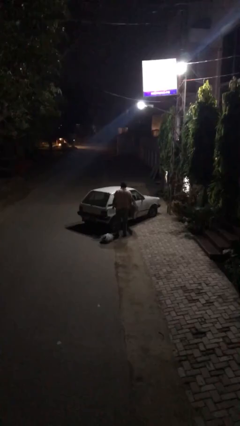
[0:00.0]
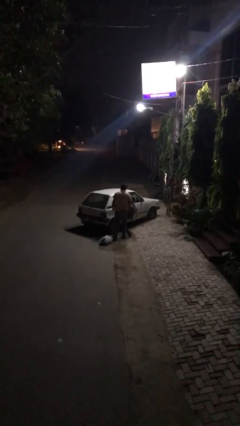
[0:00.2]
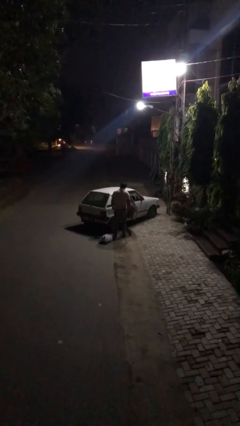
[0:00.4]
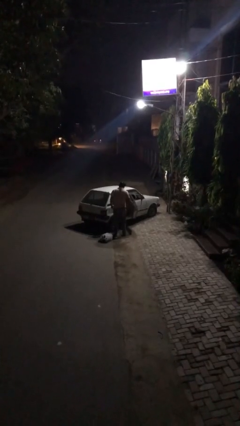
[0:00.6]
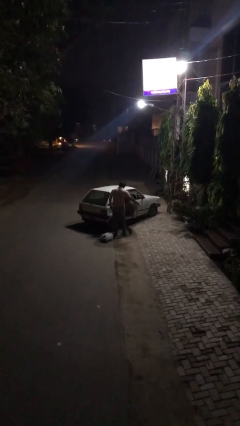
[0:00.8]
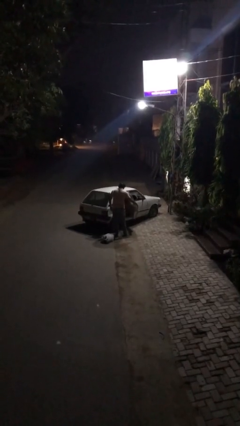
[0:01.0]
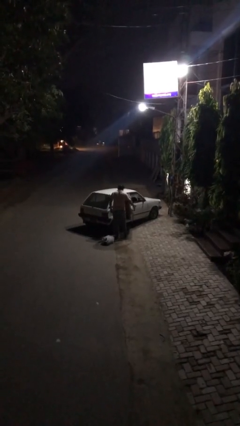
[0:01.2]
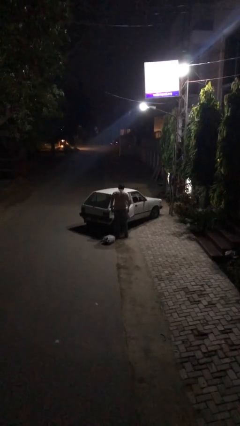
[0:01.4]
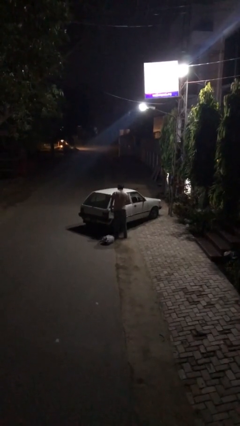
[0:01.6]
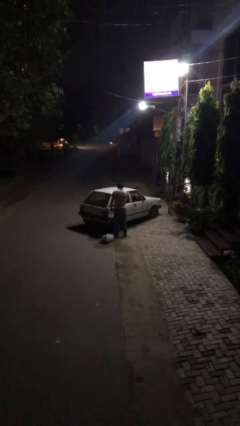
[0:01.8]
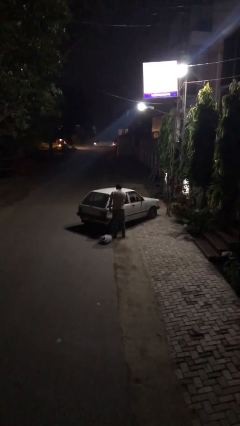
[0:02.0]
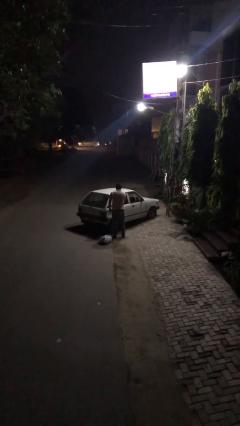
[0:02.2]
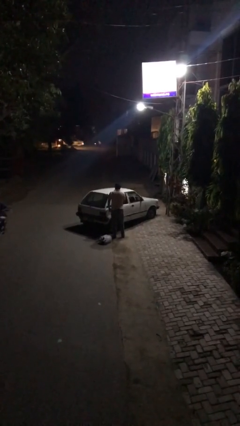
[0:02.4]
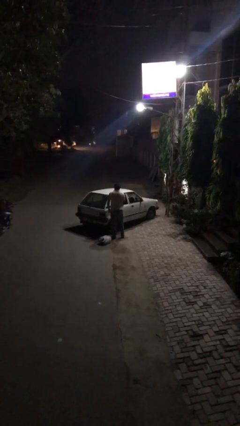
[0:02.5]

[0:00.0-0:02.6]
person closes car door

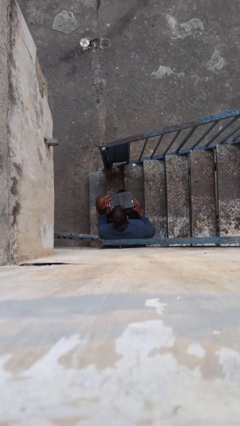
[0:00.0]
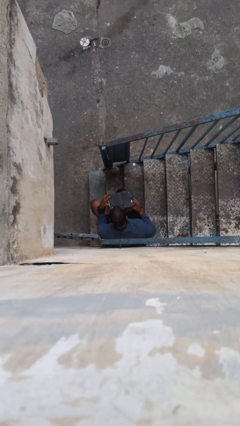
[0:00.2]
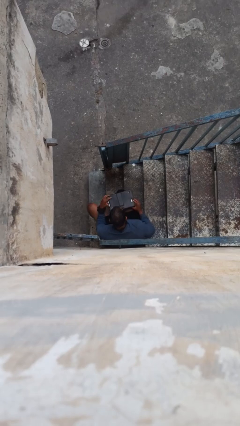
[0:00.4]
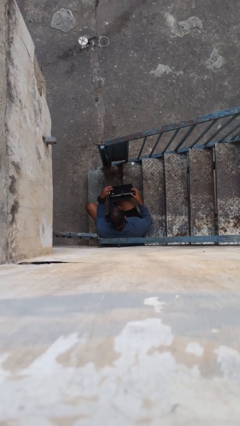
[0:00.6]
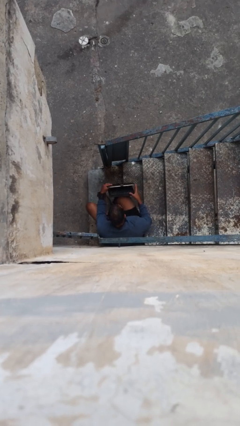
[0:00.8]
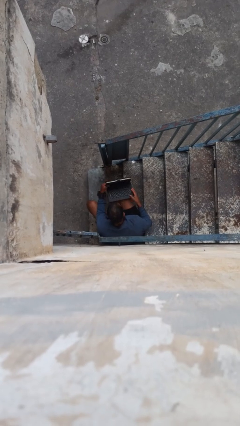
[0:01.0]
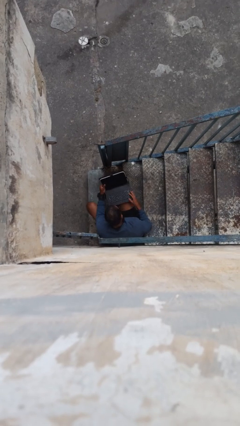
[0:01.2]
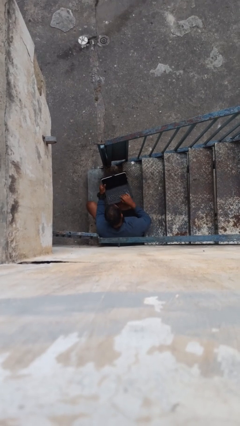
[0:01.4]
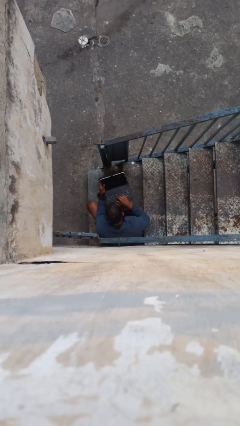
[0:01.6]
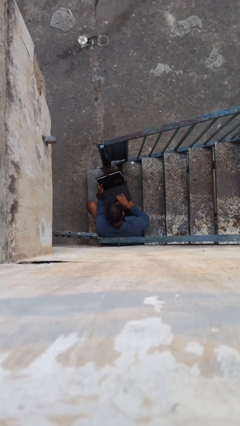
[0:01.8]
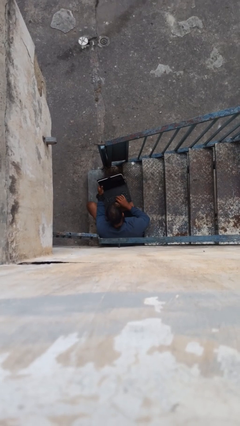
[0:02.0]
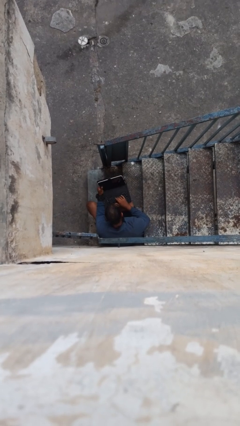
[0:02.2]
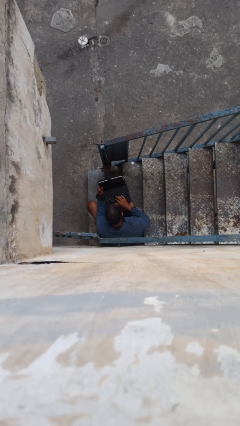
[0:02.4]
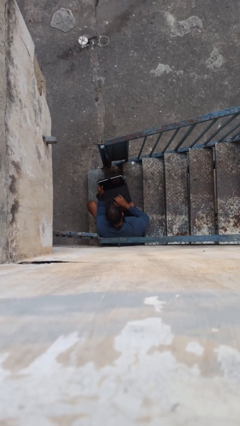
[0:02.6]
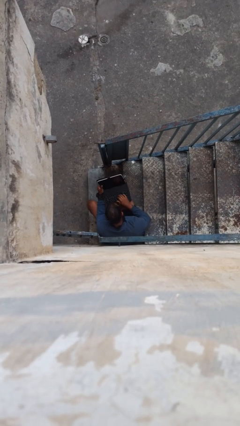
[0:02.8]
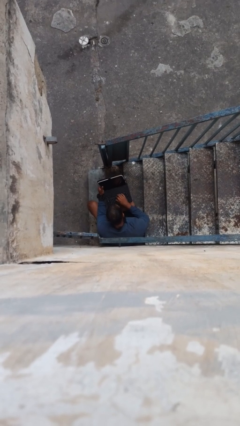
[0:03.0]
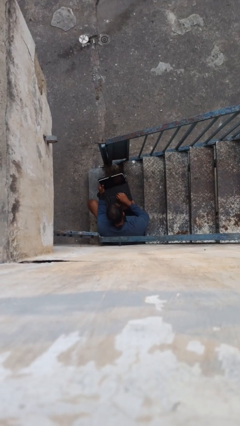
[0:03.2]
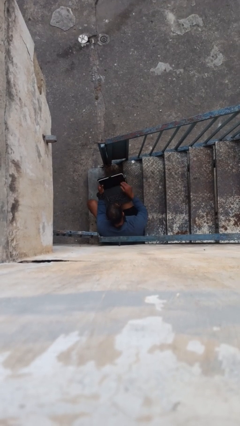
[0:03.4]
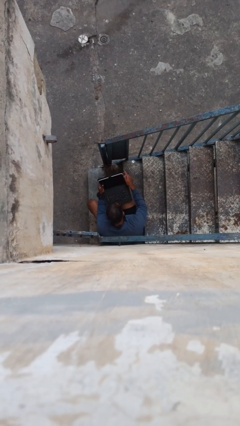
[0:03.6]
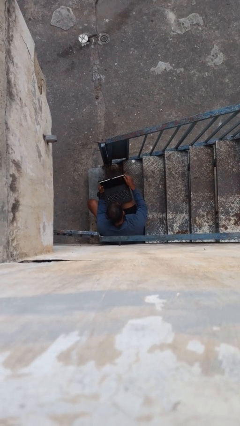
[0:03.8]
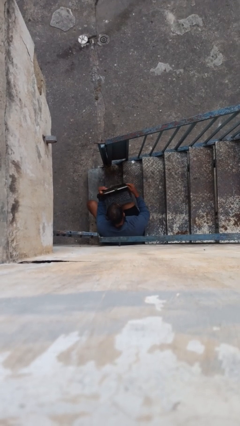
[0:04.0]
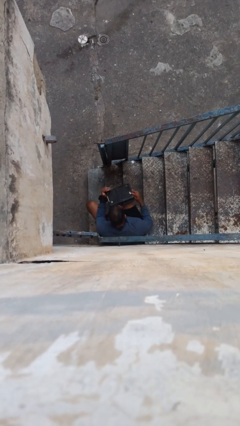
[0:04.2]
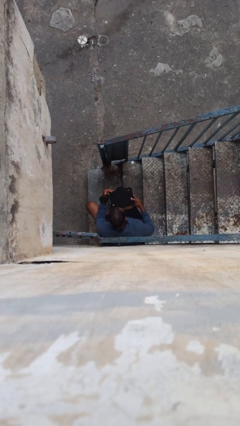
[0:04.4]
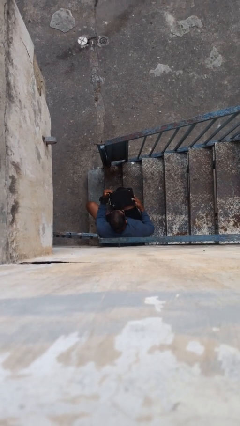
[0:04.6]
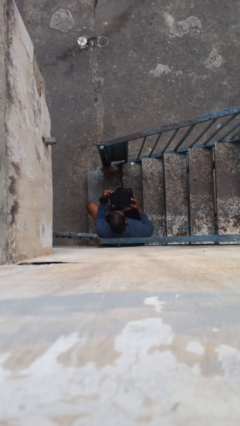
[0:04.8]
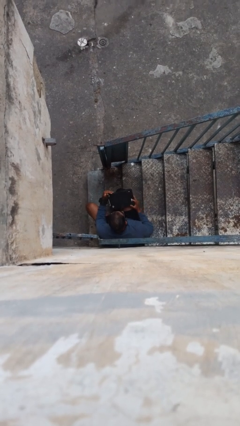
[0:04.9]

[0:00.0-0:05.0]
person interacts with laptop

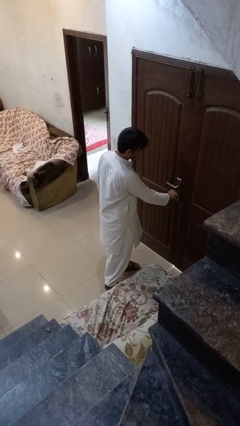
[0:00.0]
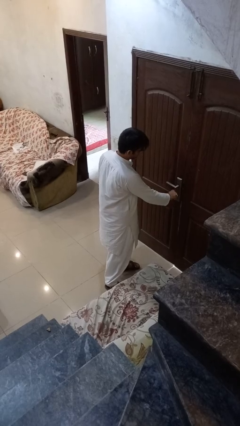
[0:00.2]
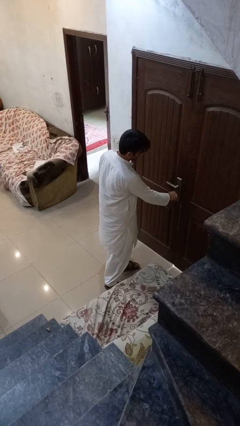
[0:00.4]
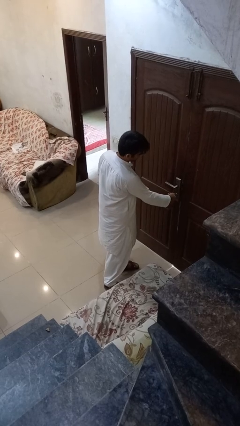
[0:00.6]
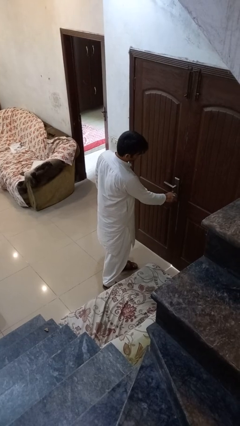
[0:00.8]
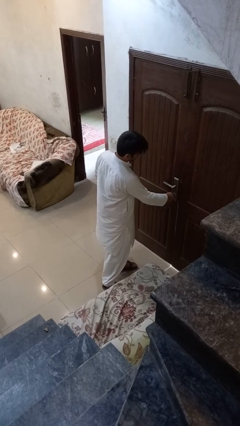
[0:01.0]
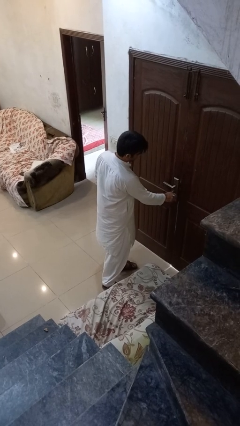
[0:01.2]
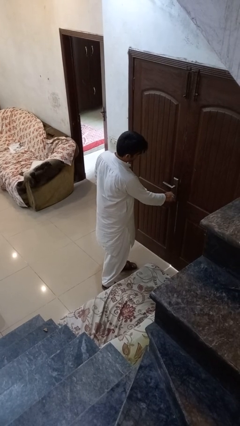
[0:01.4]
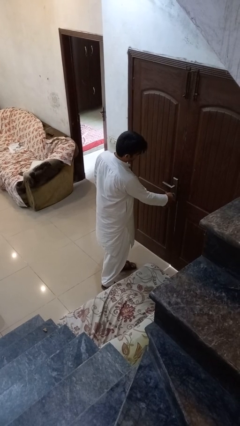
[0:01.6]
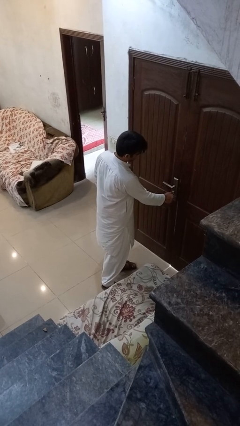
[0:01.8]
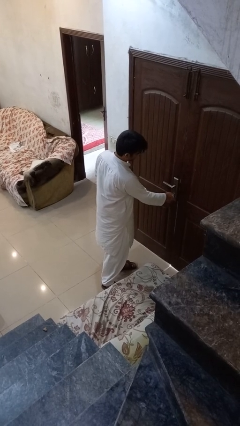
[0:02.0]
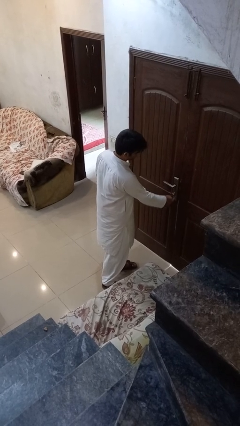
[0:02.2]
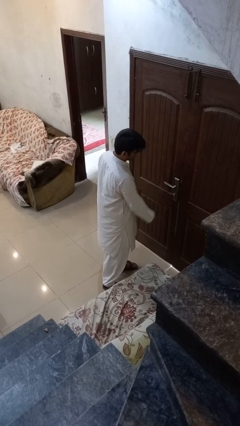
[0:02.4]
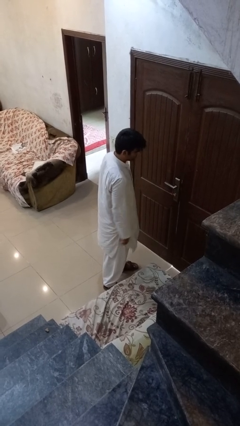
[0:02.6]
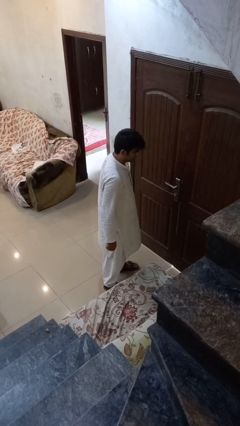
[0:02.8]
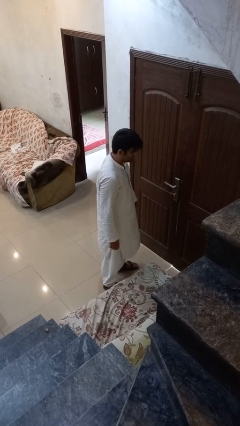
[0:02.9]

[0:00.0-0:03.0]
person locks door with keys

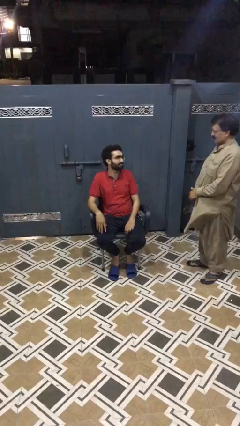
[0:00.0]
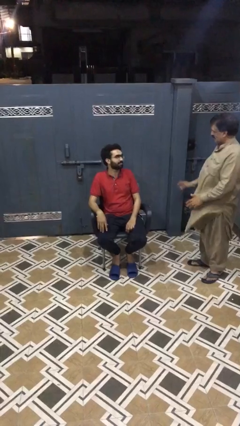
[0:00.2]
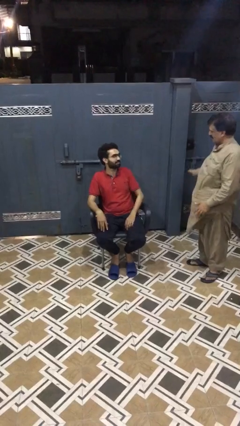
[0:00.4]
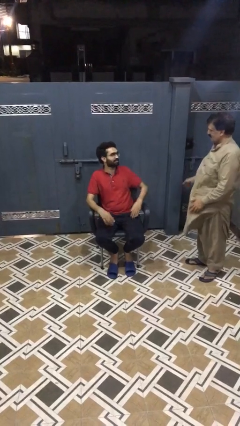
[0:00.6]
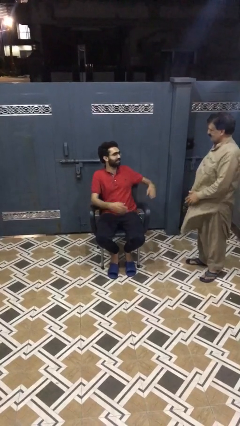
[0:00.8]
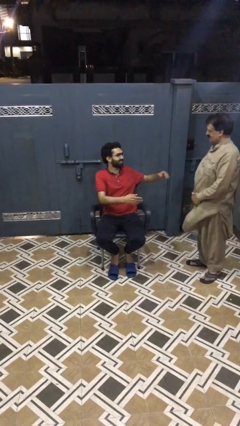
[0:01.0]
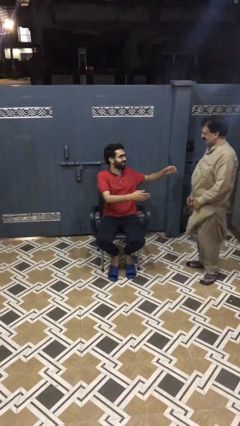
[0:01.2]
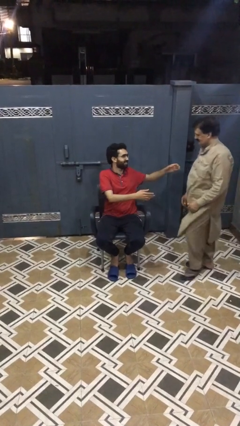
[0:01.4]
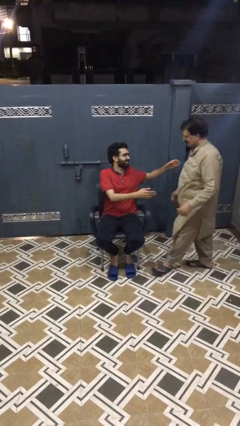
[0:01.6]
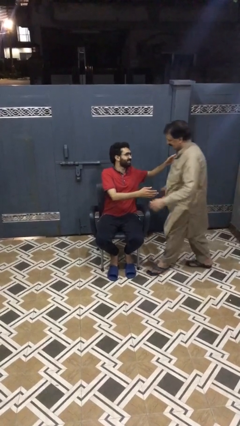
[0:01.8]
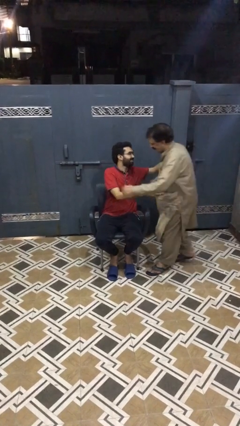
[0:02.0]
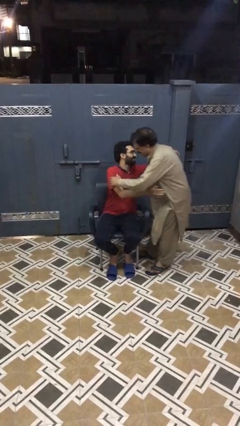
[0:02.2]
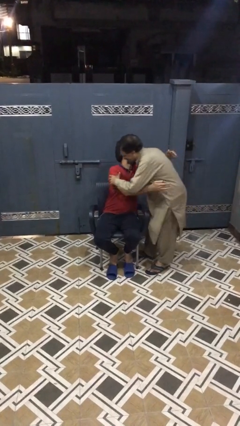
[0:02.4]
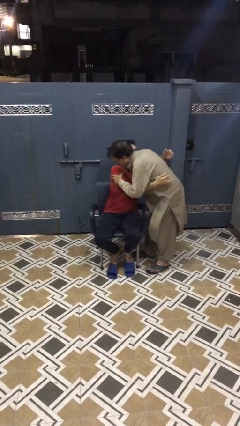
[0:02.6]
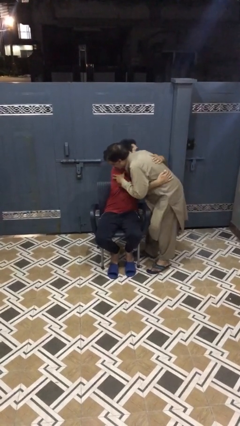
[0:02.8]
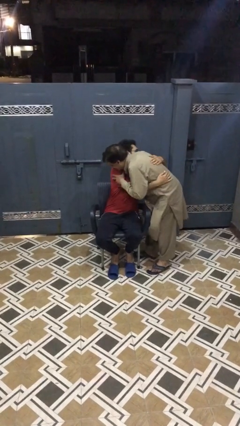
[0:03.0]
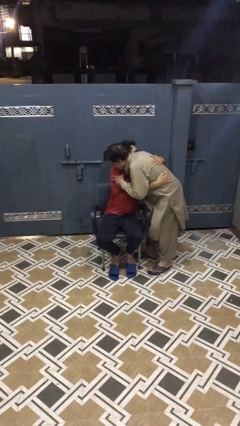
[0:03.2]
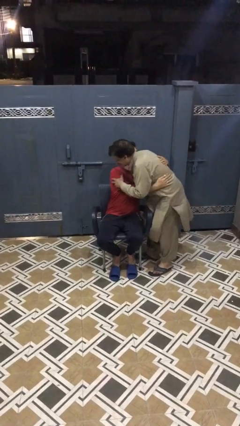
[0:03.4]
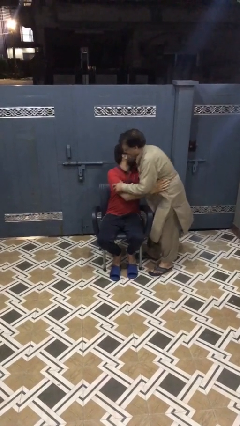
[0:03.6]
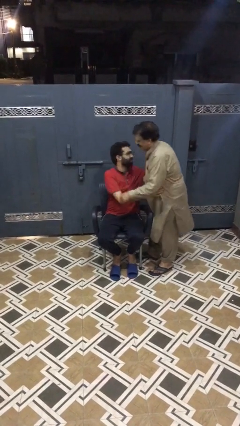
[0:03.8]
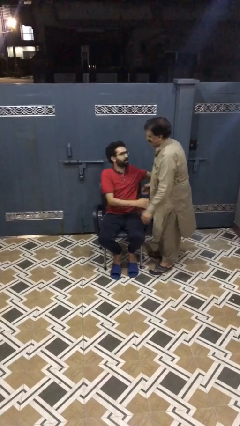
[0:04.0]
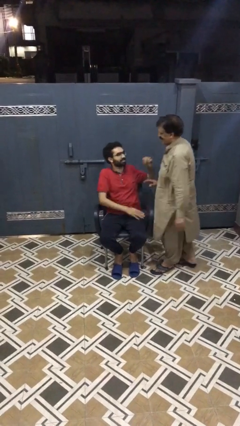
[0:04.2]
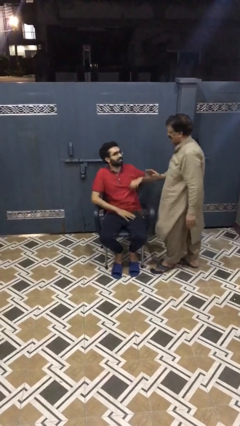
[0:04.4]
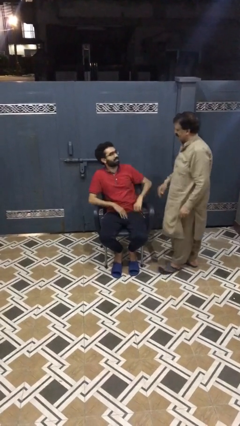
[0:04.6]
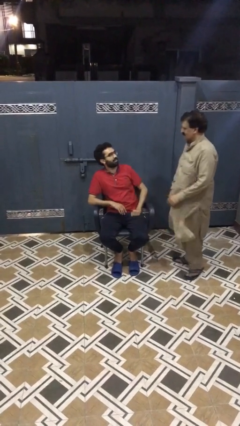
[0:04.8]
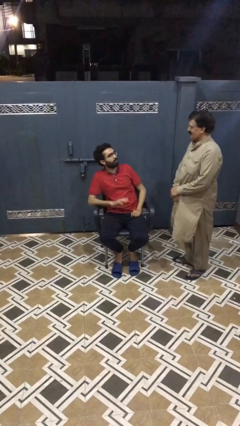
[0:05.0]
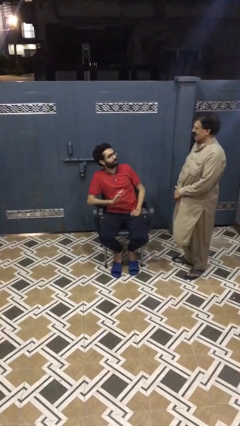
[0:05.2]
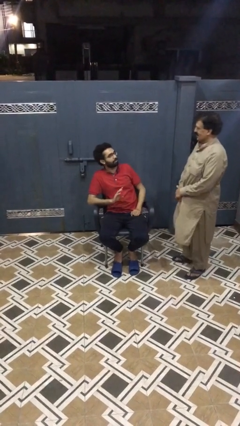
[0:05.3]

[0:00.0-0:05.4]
person embraces person

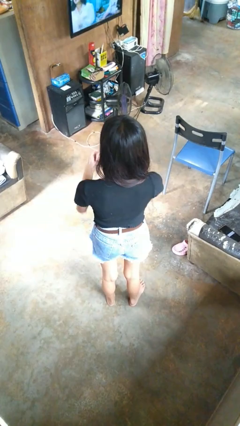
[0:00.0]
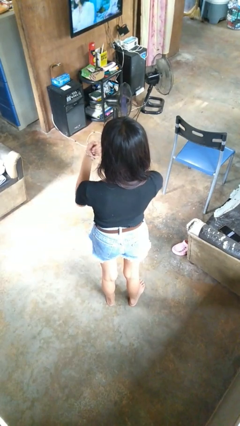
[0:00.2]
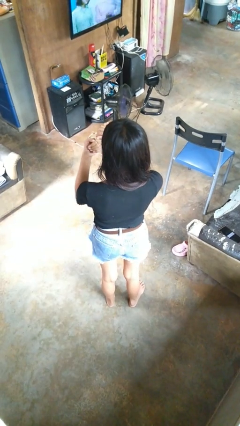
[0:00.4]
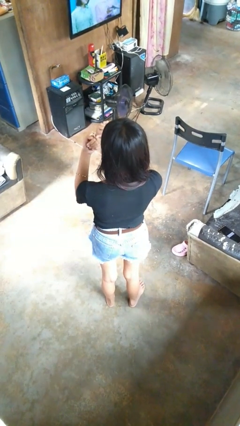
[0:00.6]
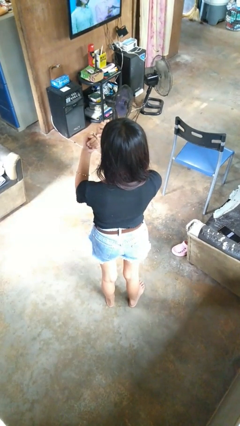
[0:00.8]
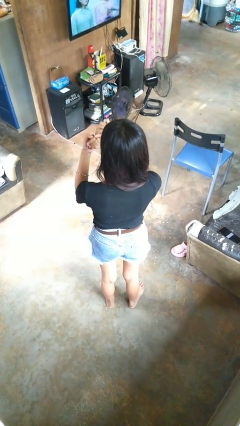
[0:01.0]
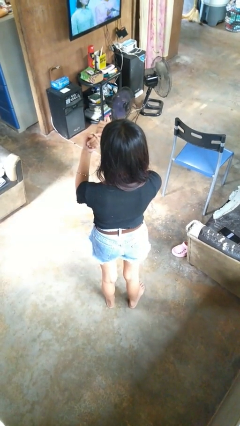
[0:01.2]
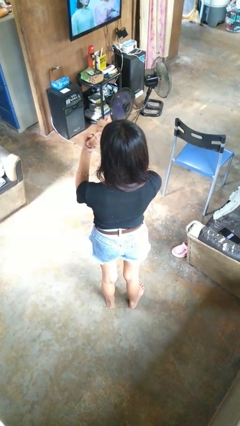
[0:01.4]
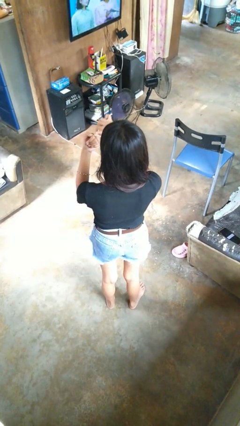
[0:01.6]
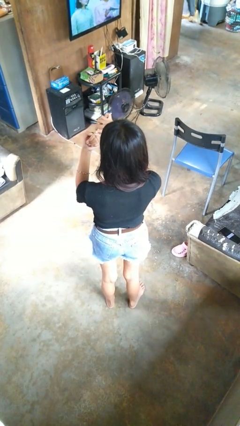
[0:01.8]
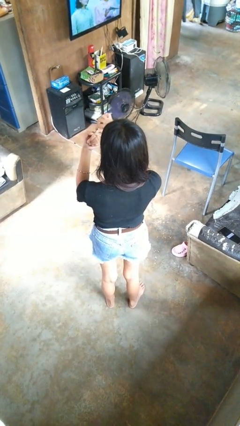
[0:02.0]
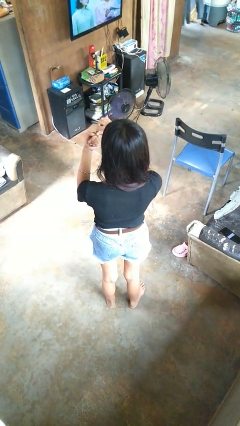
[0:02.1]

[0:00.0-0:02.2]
person files fingernails
